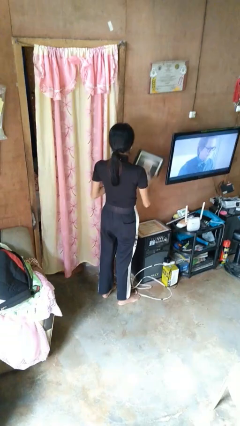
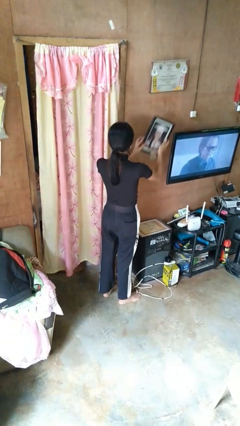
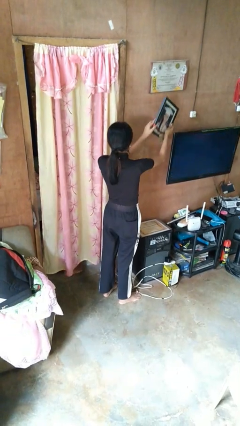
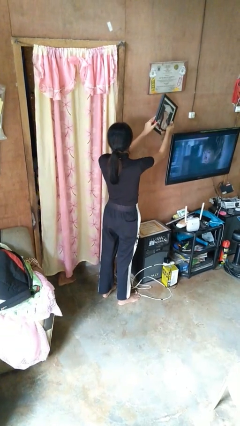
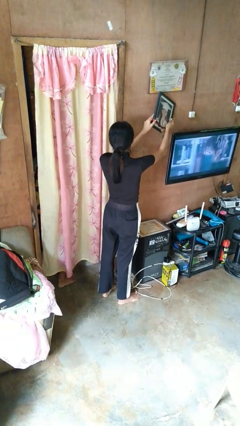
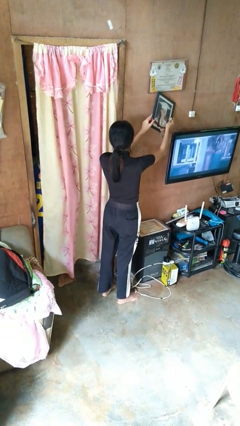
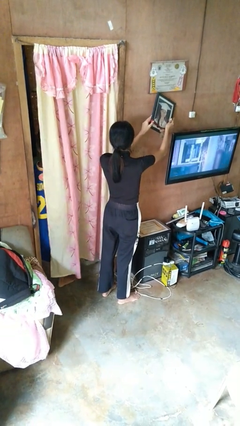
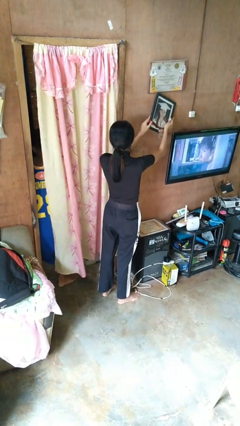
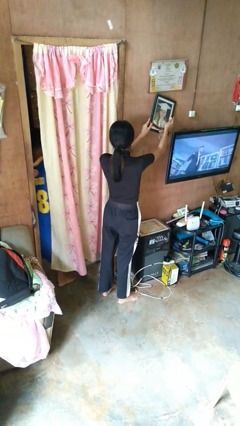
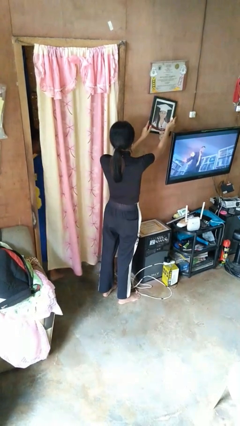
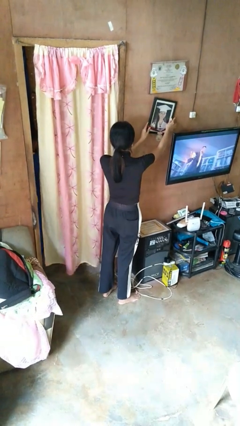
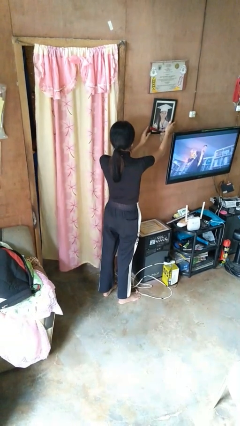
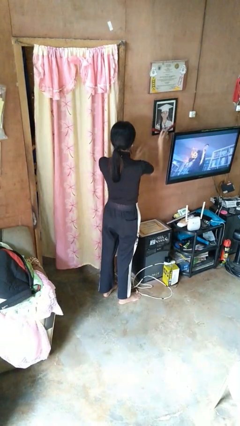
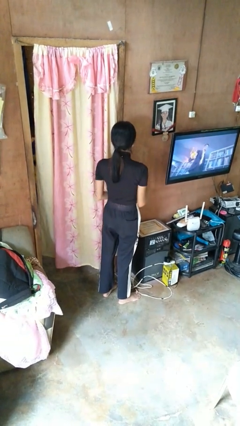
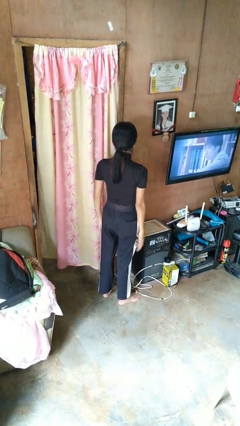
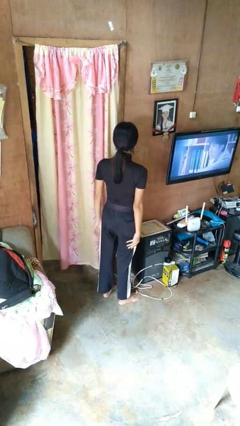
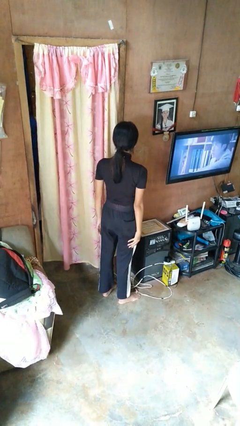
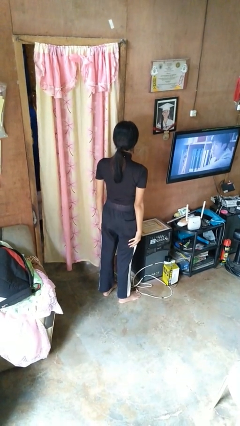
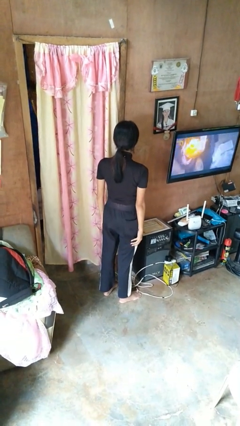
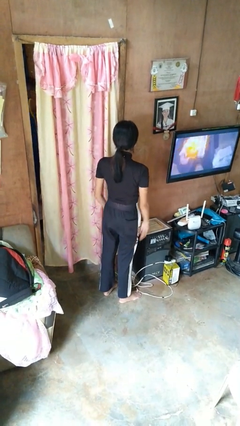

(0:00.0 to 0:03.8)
person puts up picture frame

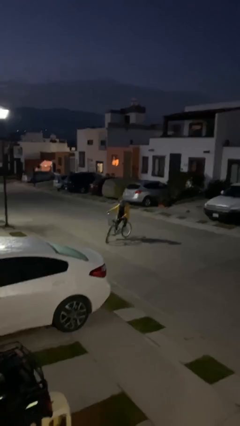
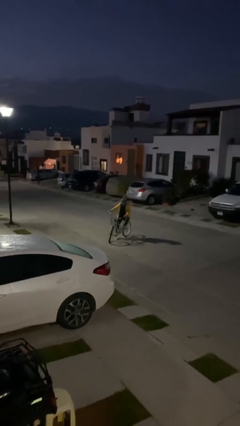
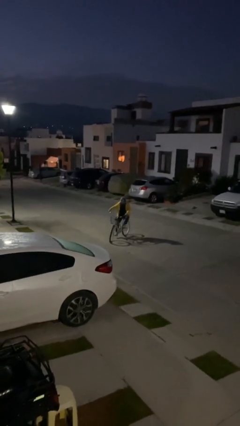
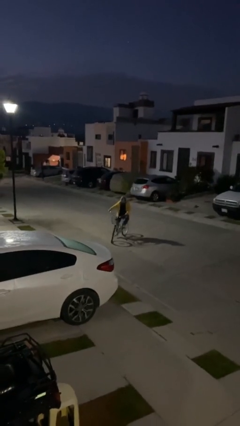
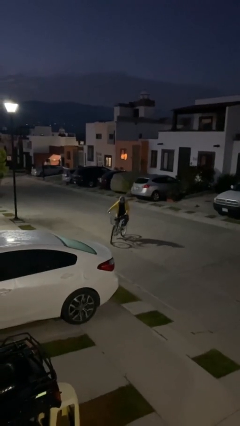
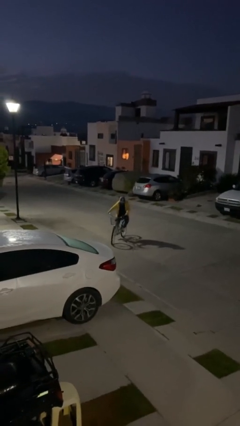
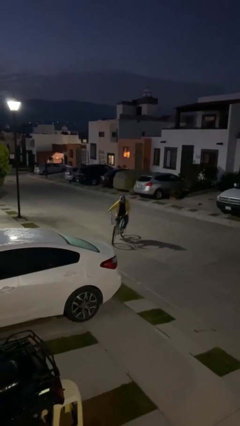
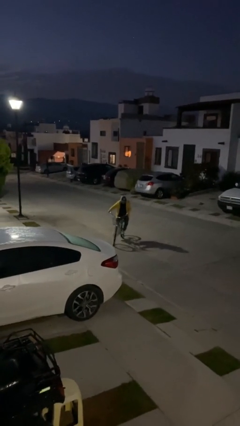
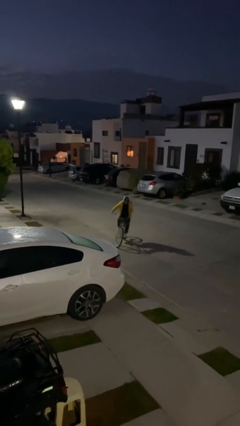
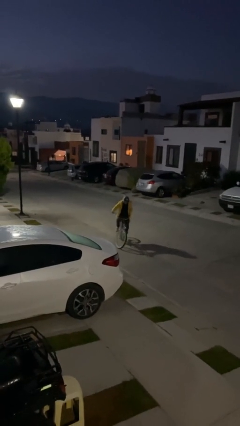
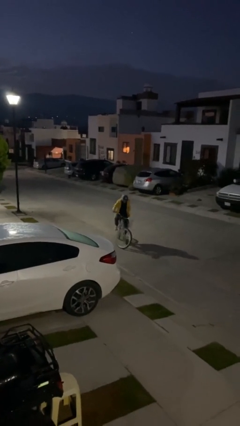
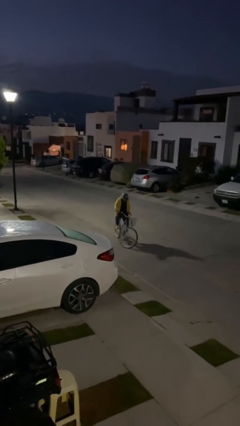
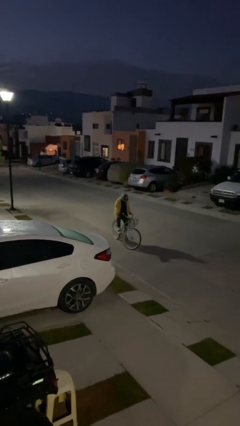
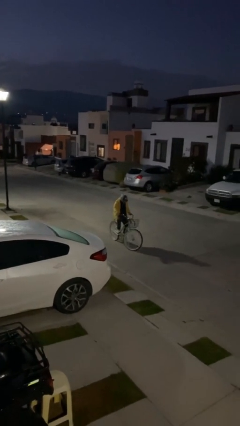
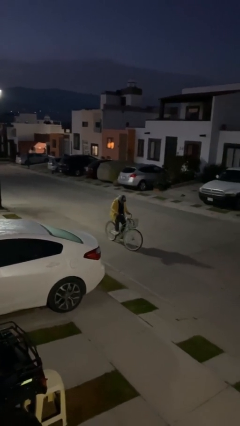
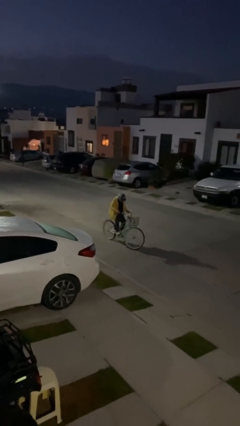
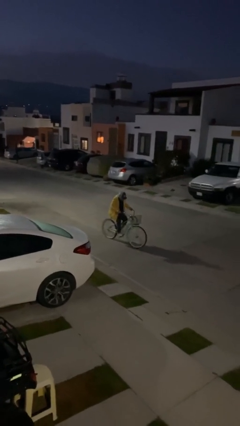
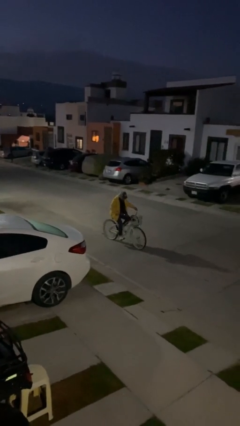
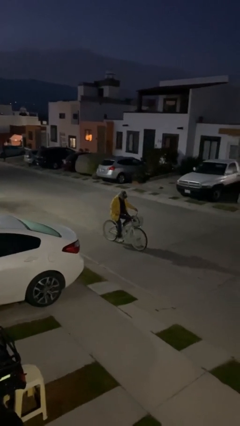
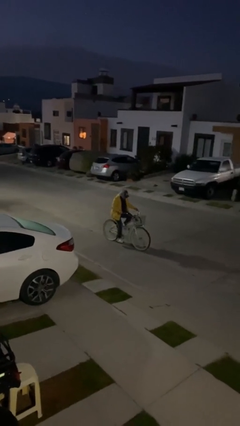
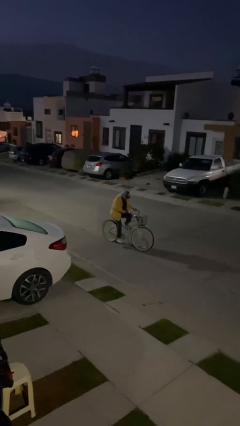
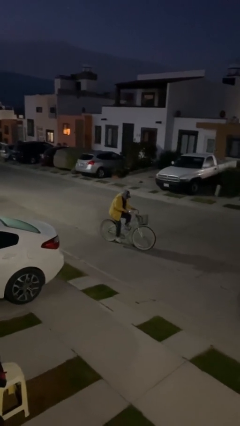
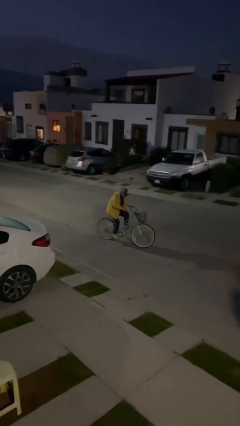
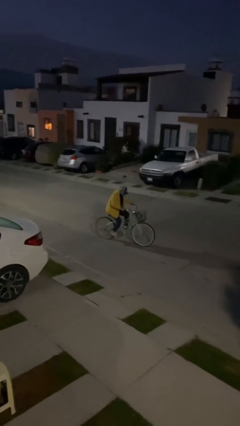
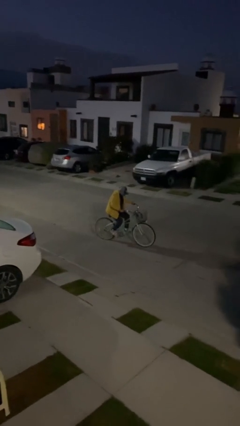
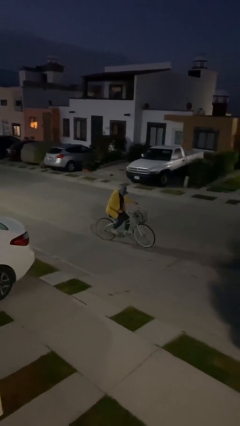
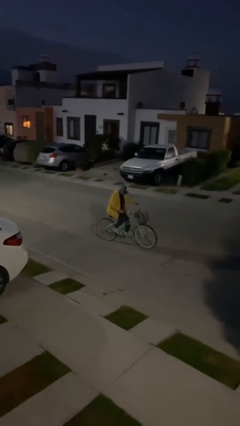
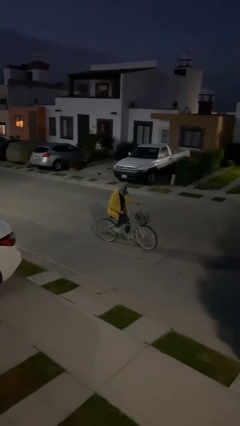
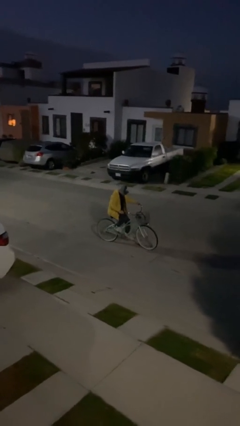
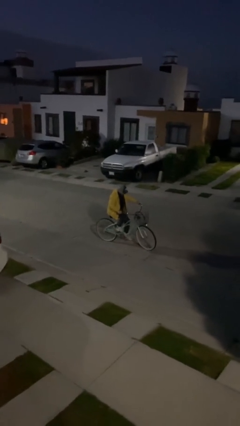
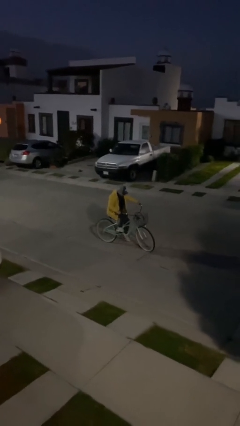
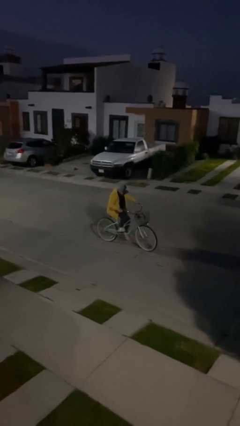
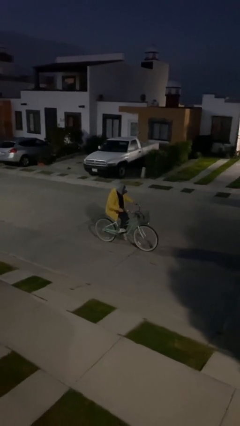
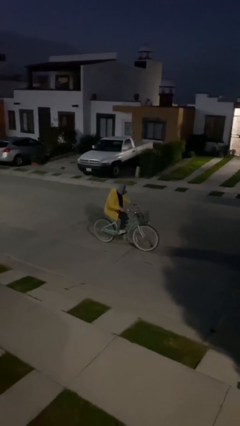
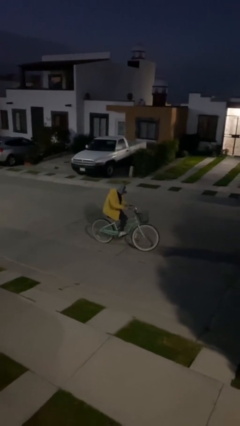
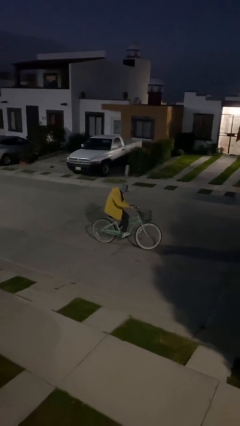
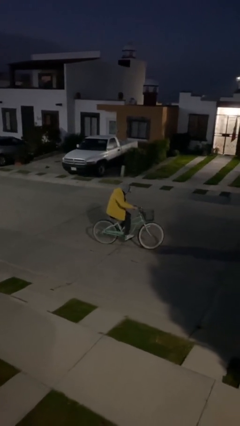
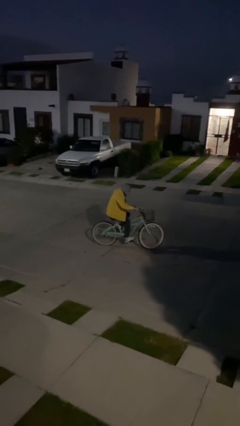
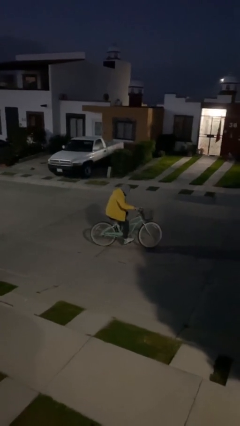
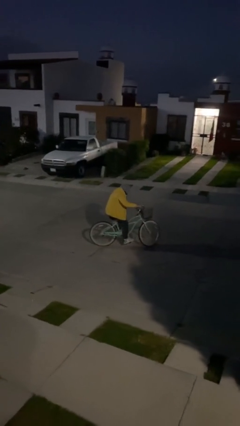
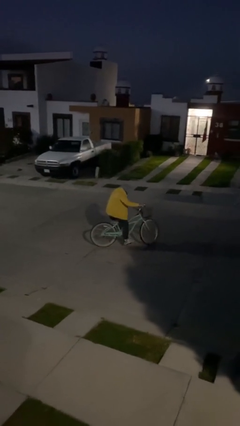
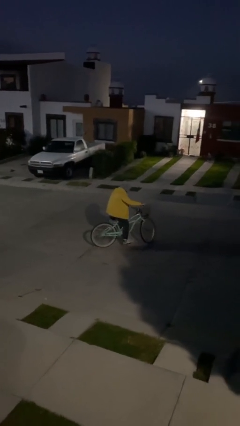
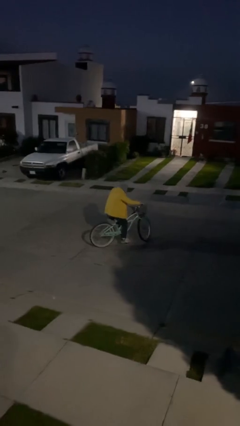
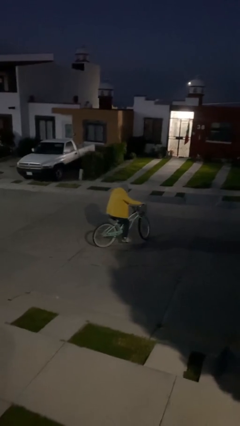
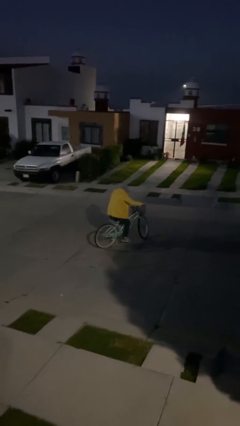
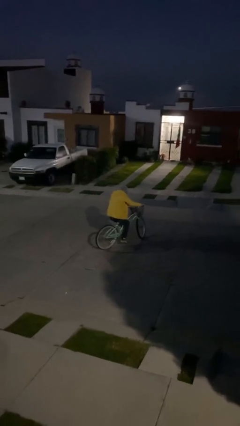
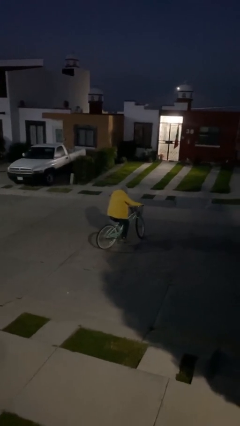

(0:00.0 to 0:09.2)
person rides bicycle

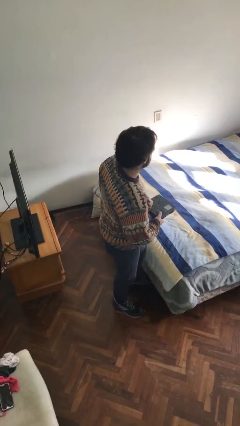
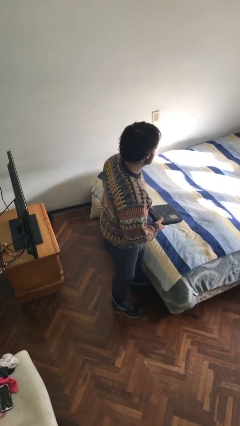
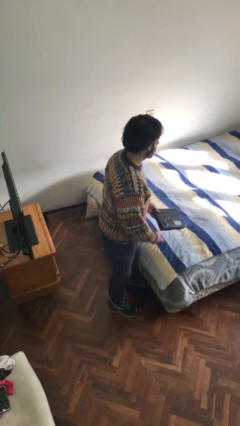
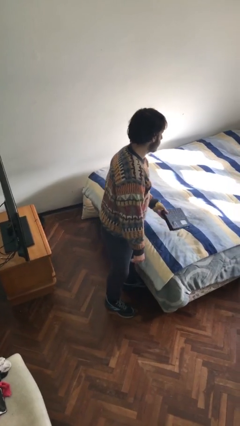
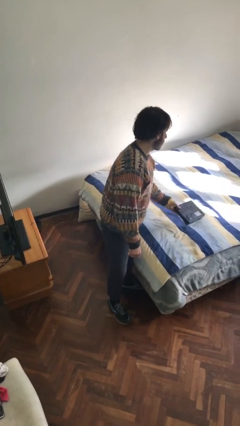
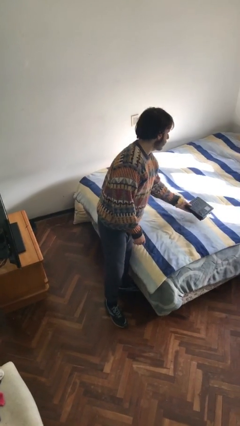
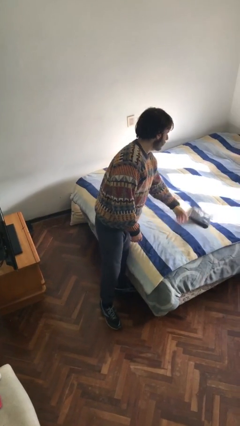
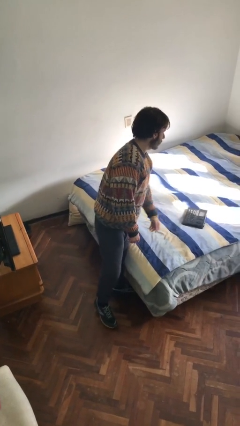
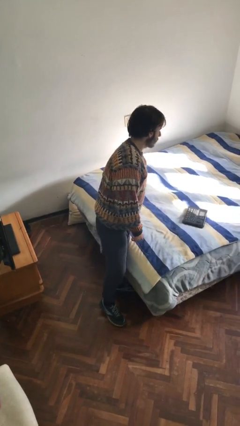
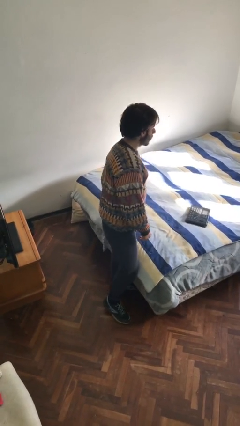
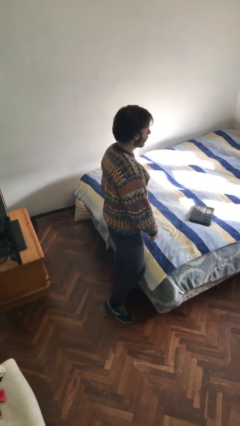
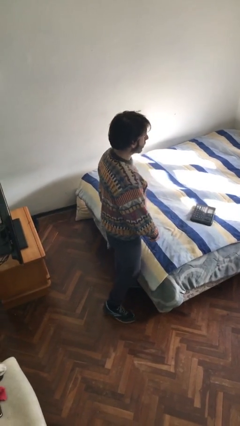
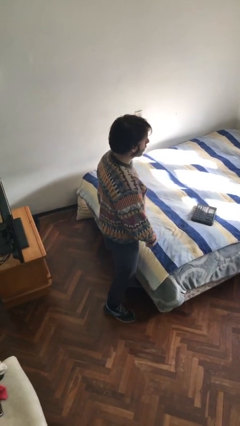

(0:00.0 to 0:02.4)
person puts down object on bed

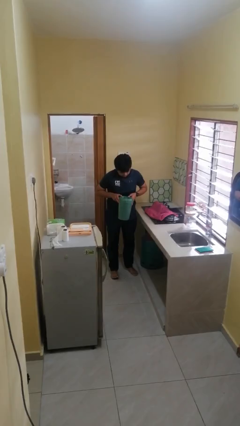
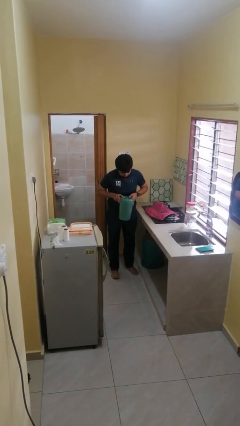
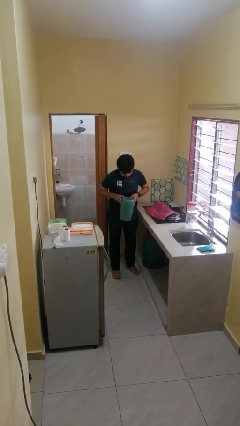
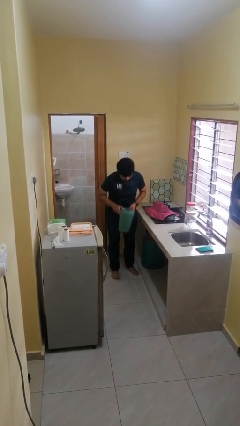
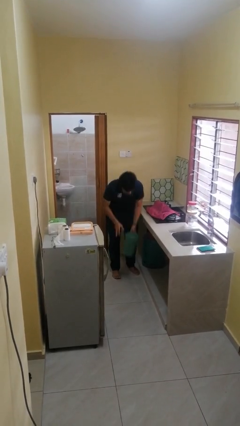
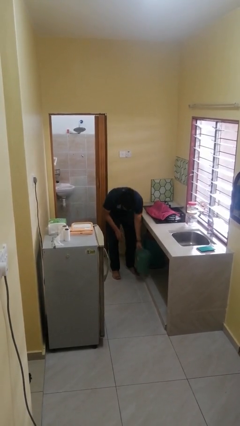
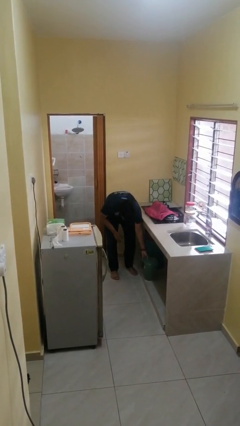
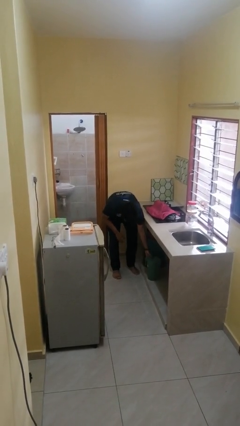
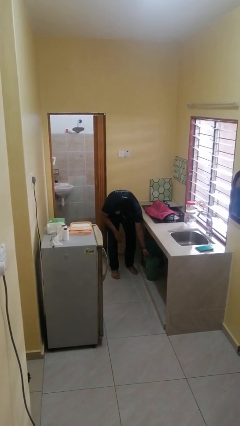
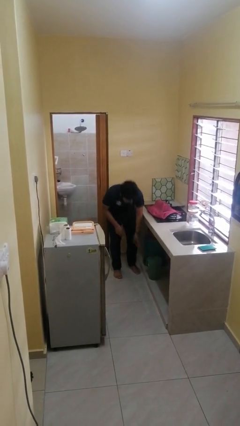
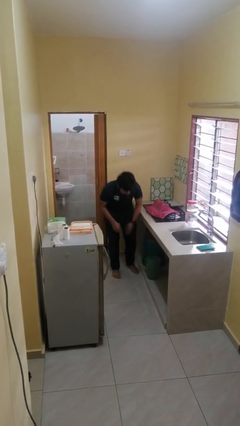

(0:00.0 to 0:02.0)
person puts down object into cabinet
